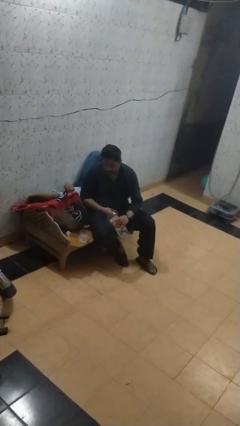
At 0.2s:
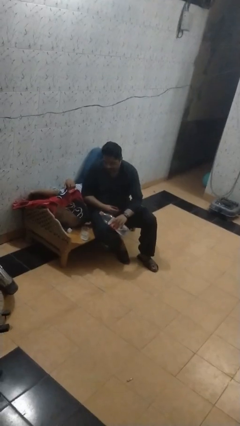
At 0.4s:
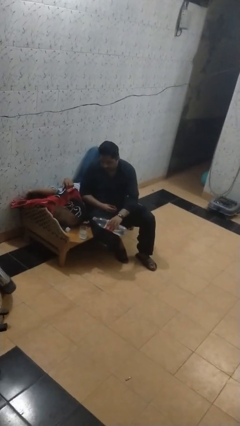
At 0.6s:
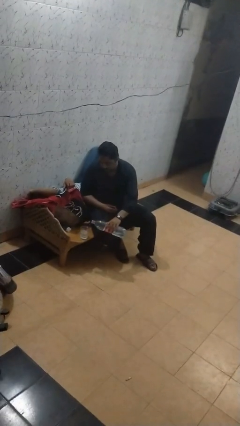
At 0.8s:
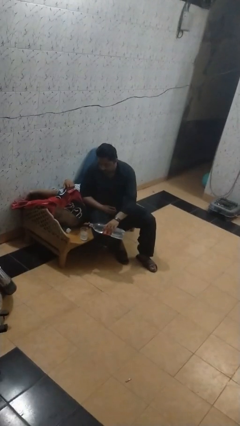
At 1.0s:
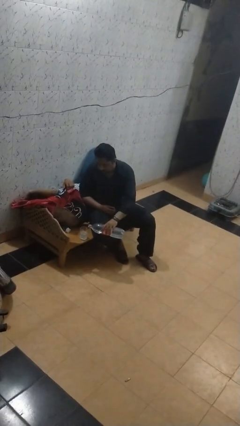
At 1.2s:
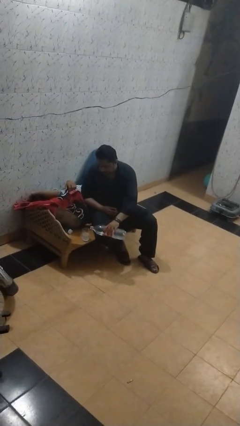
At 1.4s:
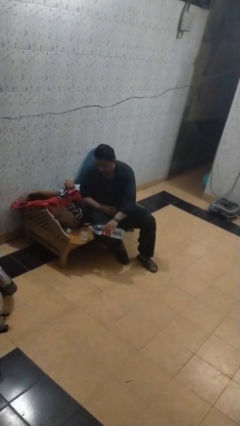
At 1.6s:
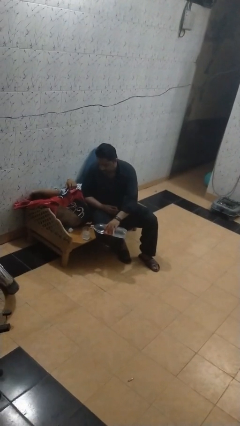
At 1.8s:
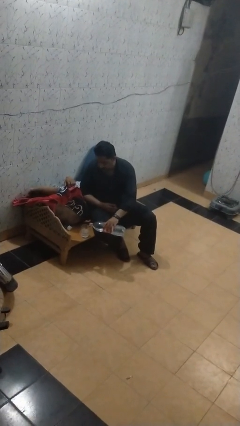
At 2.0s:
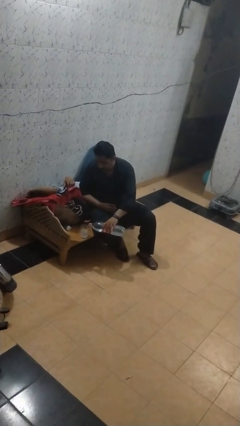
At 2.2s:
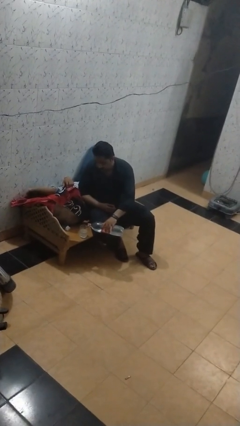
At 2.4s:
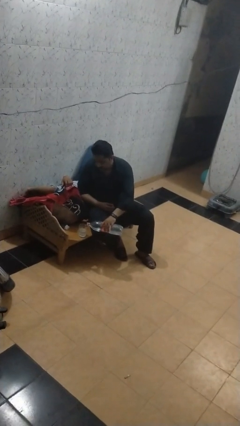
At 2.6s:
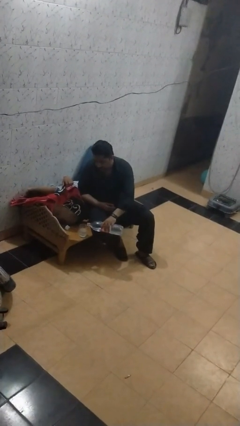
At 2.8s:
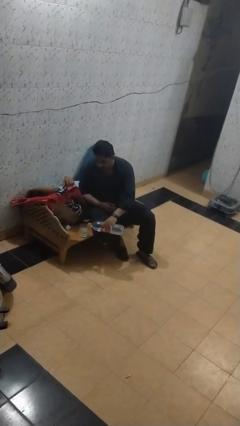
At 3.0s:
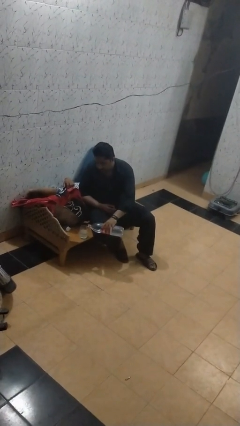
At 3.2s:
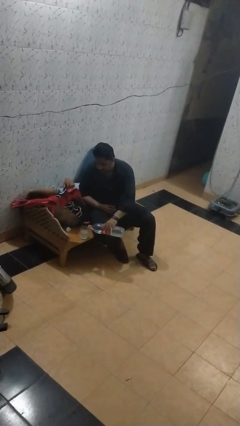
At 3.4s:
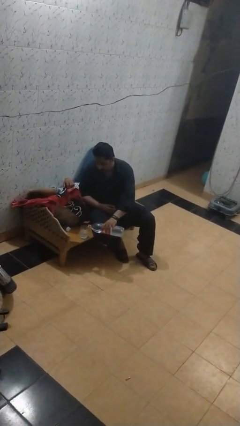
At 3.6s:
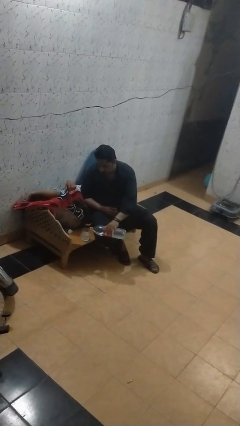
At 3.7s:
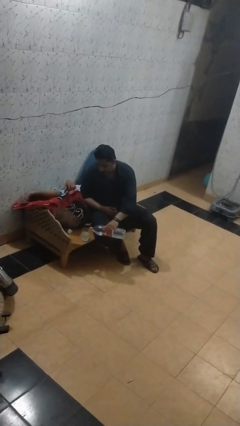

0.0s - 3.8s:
person pours liquid into cup

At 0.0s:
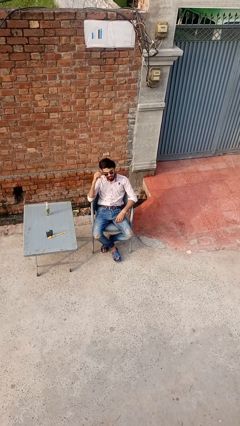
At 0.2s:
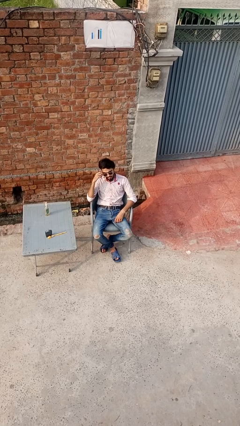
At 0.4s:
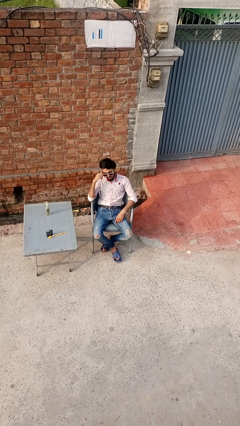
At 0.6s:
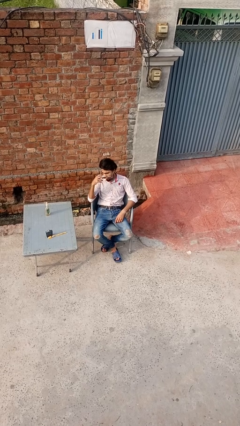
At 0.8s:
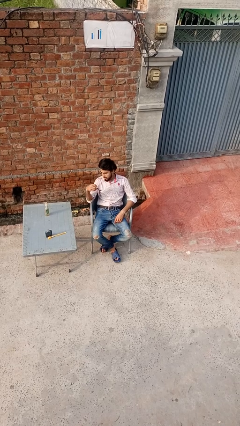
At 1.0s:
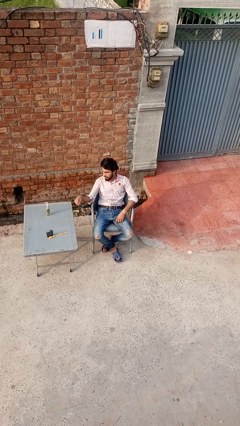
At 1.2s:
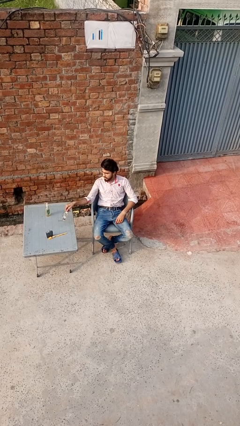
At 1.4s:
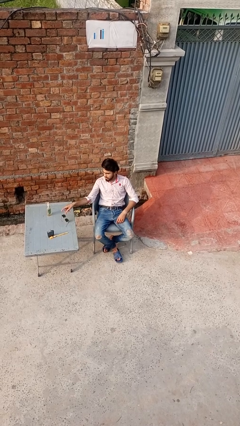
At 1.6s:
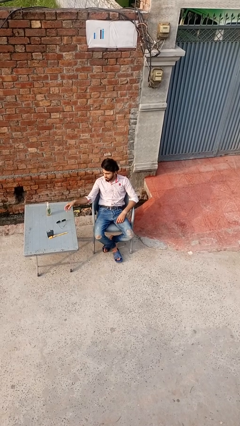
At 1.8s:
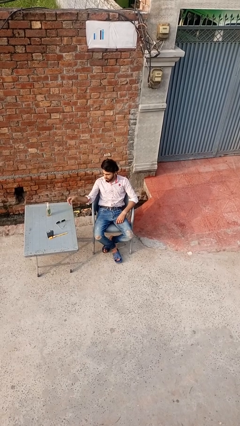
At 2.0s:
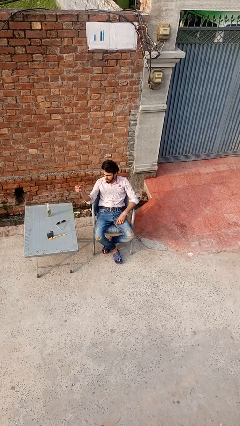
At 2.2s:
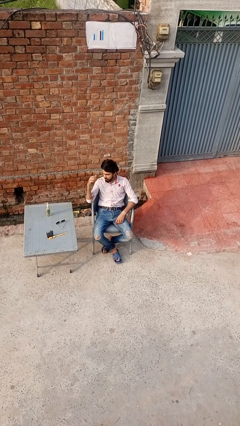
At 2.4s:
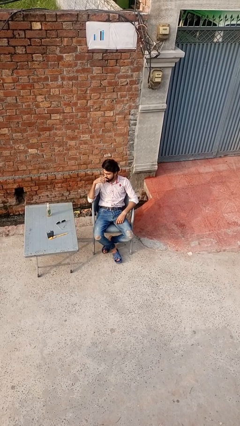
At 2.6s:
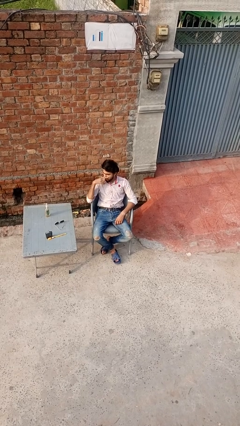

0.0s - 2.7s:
person takes off sunglasses

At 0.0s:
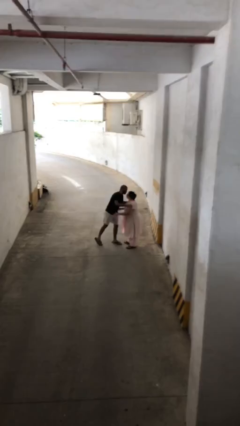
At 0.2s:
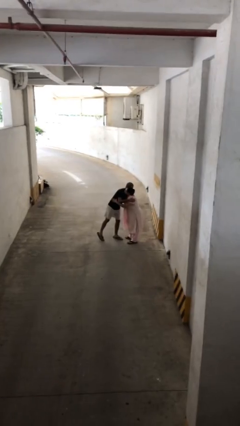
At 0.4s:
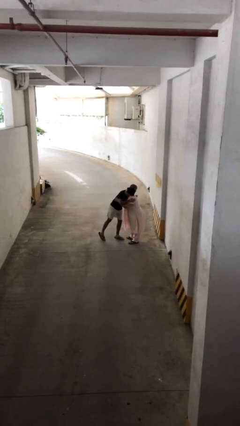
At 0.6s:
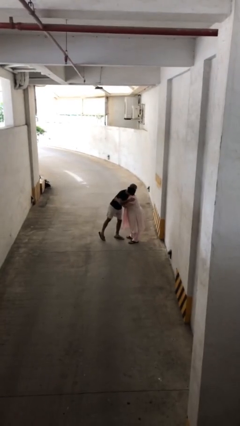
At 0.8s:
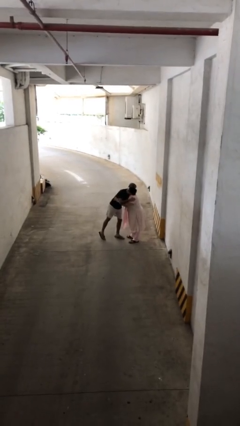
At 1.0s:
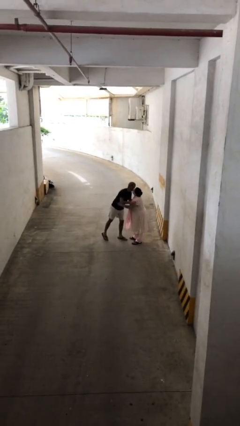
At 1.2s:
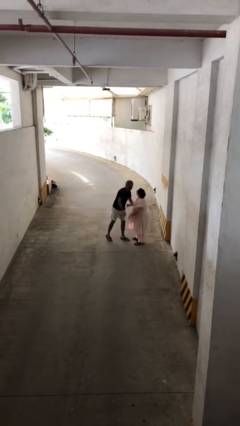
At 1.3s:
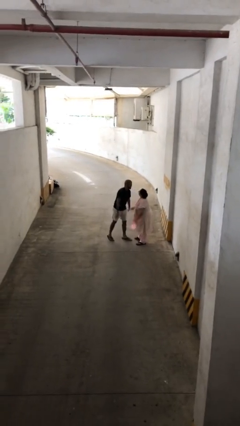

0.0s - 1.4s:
person embraces person

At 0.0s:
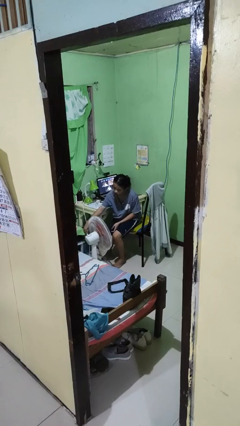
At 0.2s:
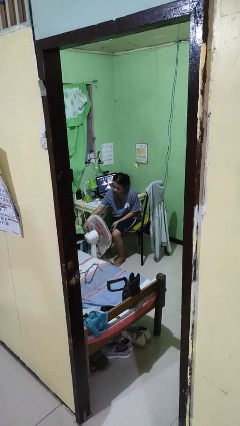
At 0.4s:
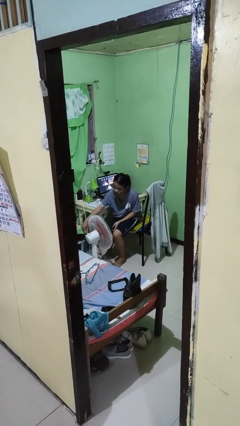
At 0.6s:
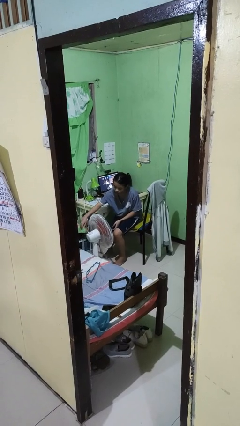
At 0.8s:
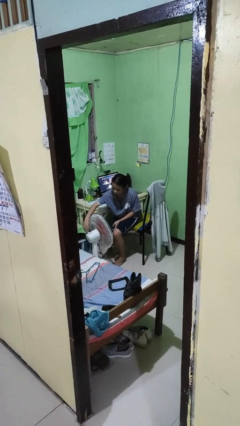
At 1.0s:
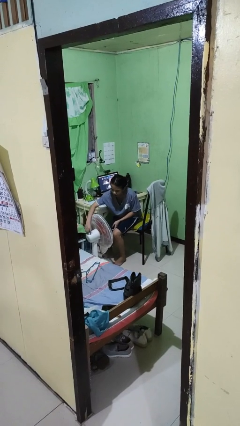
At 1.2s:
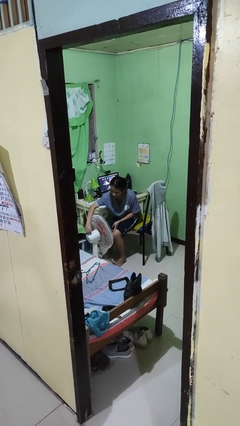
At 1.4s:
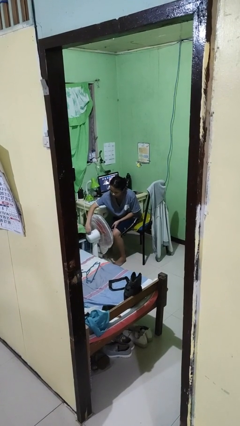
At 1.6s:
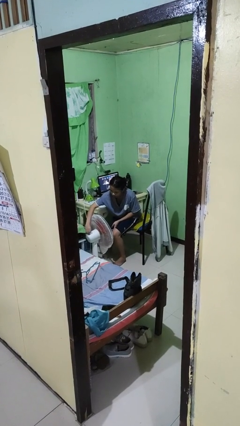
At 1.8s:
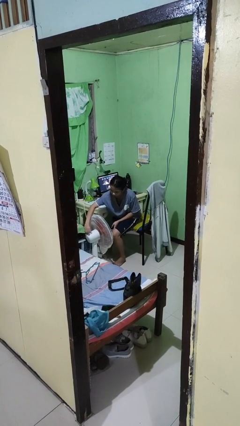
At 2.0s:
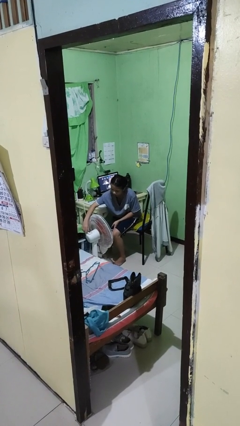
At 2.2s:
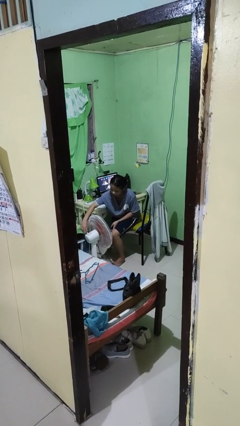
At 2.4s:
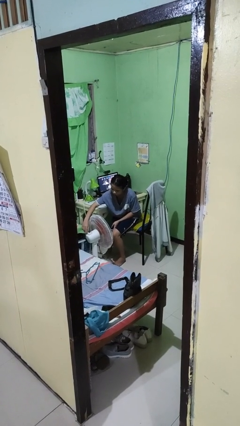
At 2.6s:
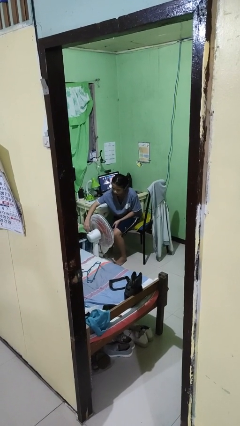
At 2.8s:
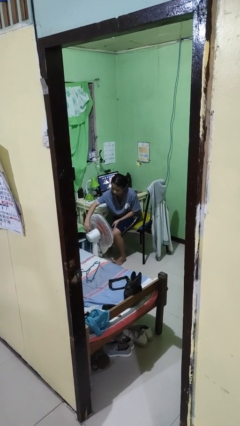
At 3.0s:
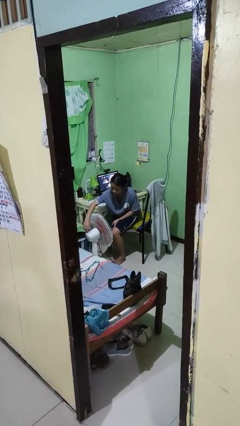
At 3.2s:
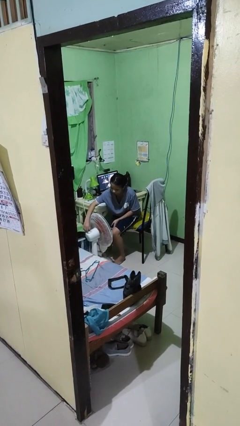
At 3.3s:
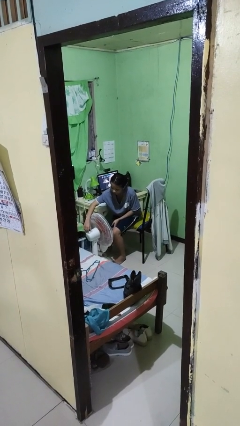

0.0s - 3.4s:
person turns on fan

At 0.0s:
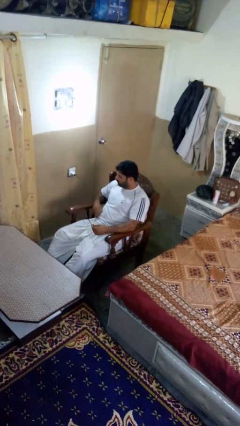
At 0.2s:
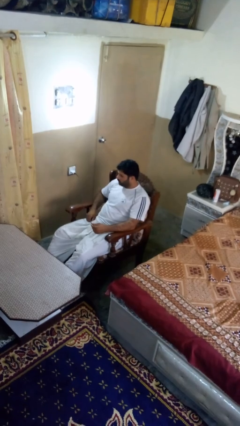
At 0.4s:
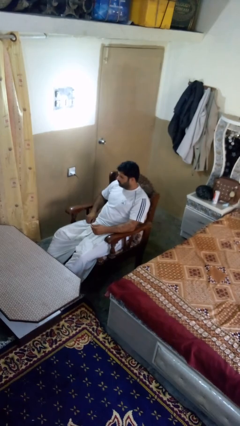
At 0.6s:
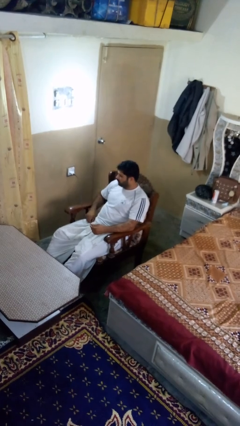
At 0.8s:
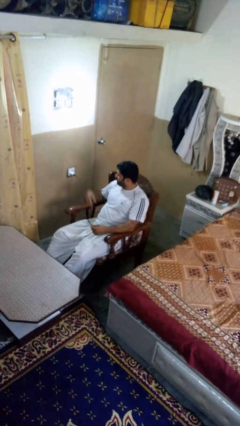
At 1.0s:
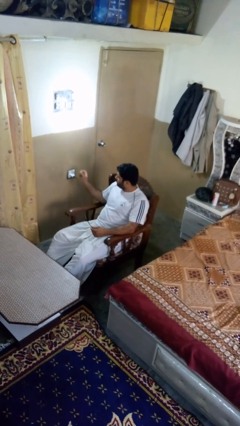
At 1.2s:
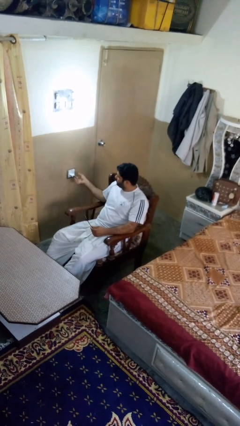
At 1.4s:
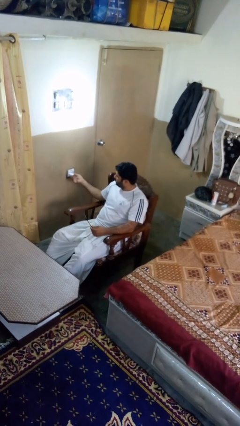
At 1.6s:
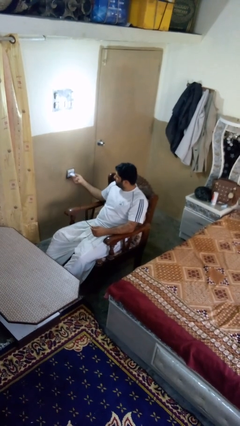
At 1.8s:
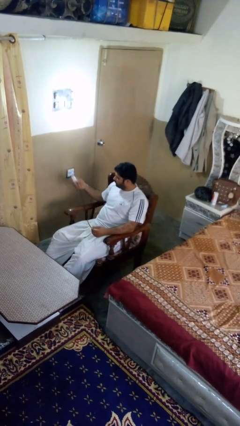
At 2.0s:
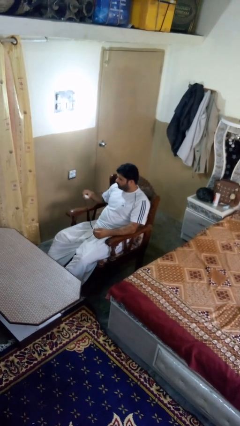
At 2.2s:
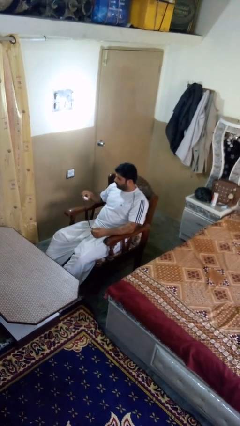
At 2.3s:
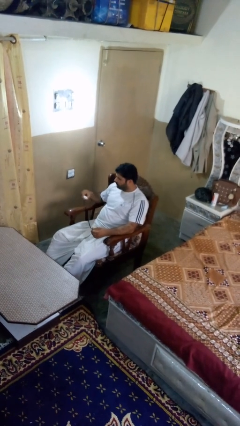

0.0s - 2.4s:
person unplugs from electrical socket

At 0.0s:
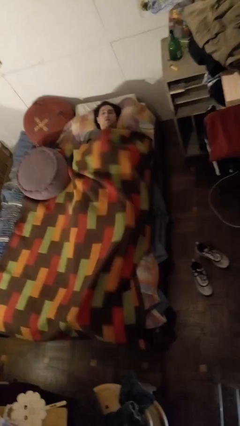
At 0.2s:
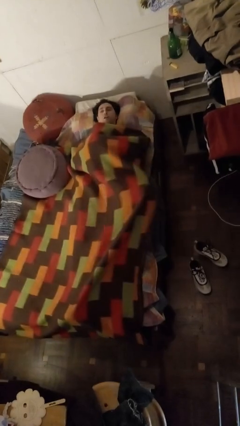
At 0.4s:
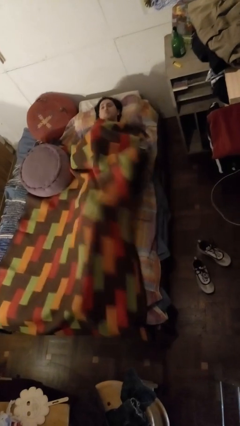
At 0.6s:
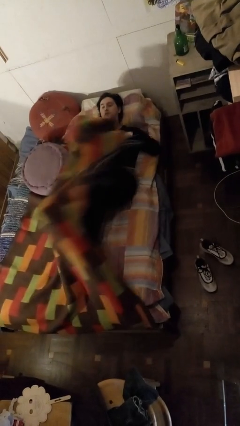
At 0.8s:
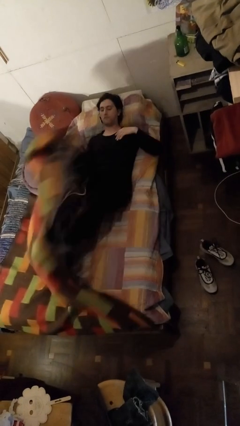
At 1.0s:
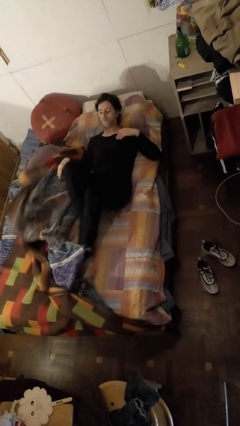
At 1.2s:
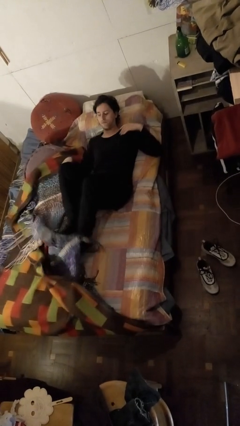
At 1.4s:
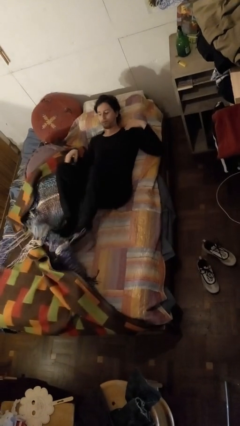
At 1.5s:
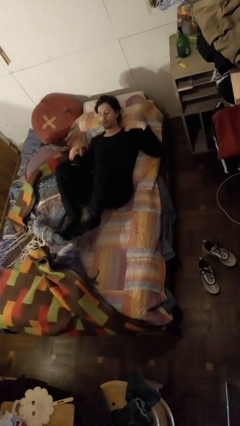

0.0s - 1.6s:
person uncovers with bedsheets

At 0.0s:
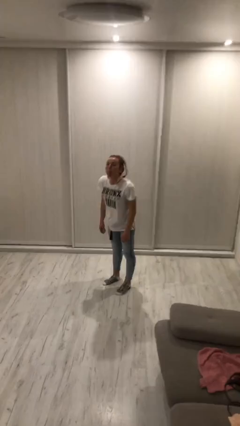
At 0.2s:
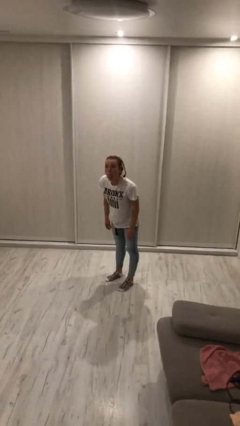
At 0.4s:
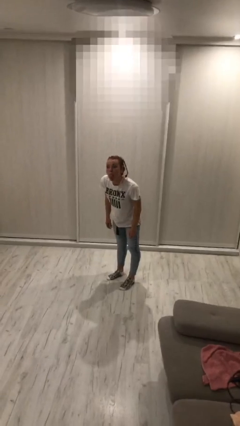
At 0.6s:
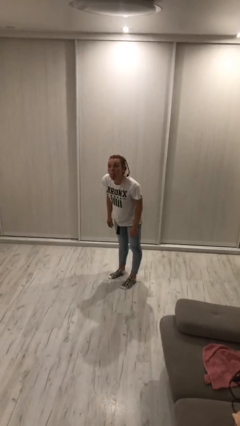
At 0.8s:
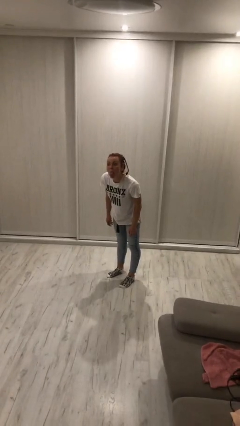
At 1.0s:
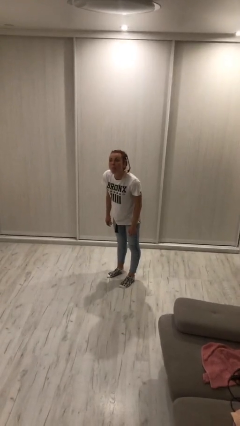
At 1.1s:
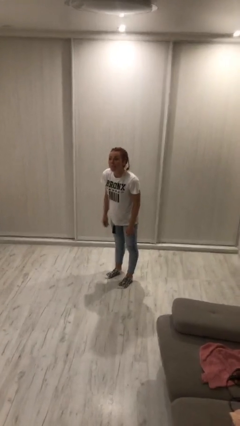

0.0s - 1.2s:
person sticks out tongue

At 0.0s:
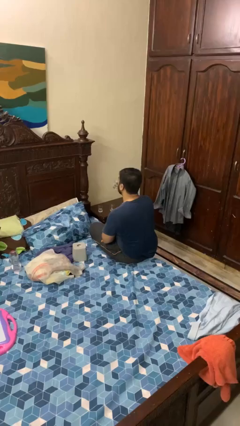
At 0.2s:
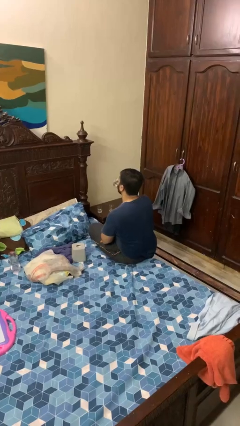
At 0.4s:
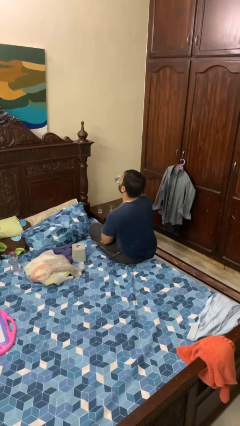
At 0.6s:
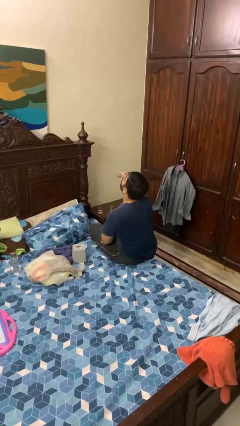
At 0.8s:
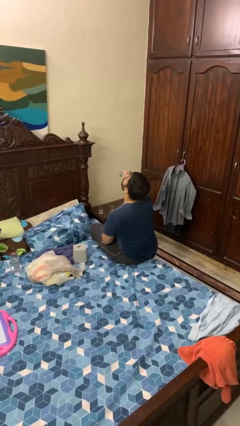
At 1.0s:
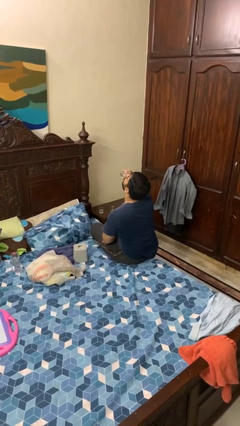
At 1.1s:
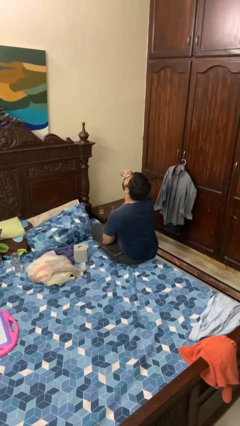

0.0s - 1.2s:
person drinks from shotglass
